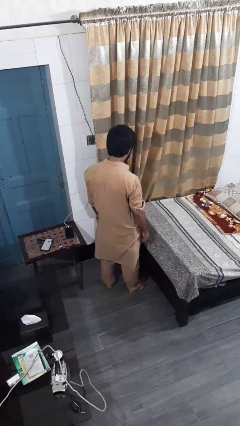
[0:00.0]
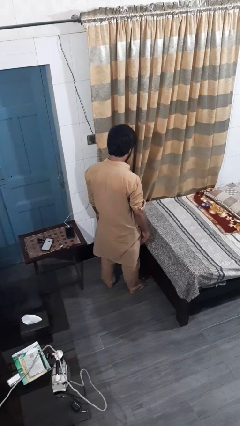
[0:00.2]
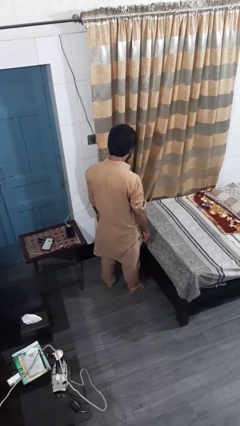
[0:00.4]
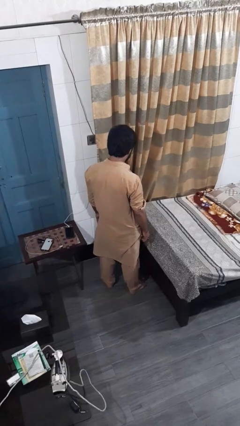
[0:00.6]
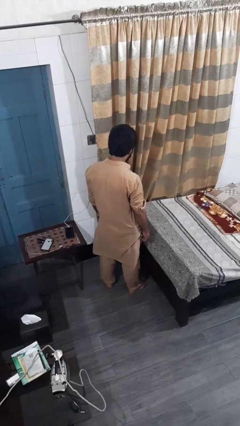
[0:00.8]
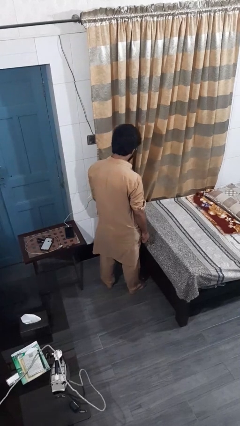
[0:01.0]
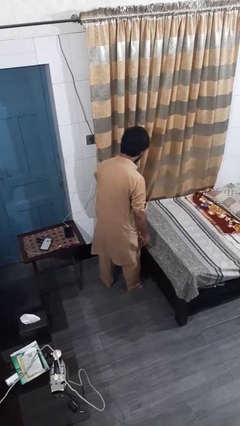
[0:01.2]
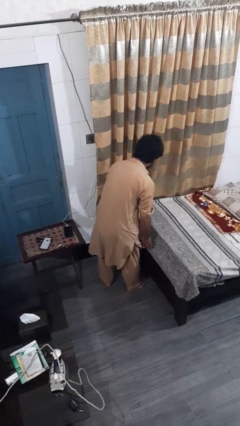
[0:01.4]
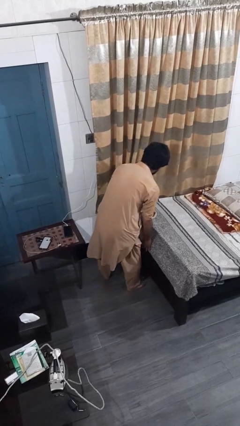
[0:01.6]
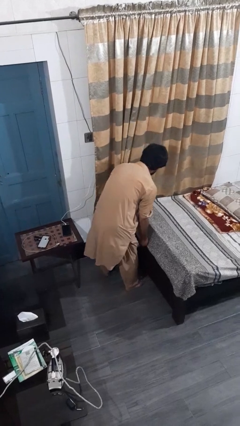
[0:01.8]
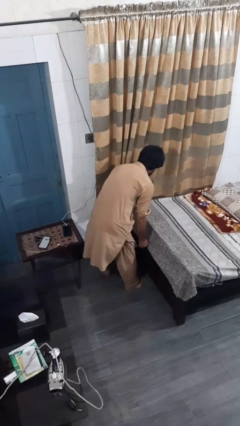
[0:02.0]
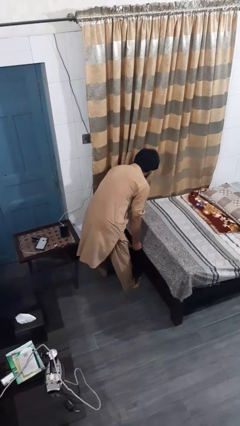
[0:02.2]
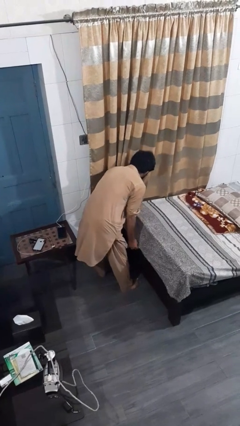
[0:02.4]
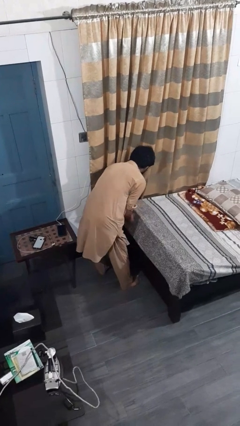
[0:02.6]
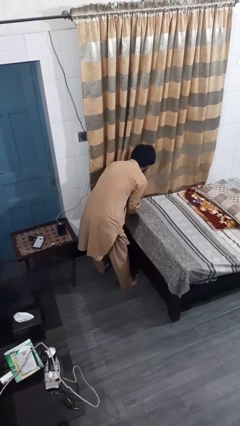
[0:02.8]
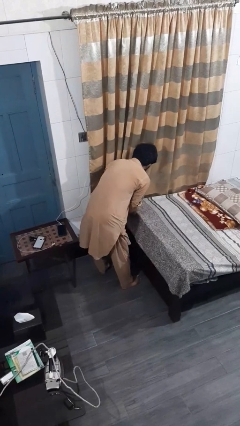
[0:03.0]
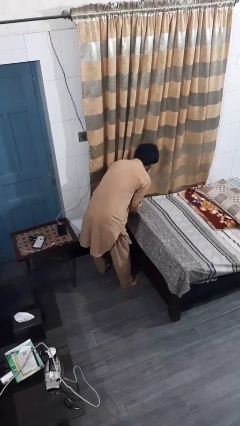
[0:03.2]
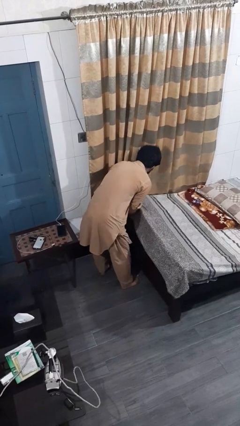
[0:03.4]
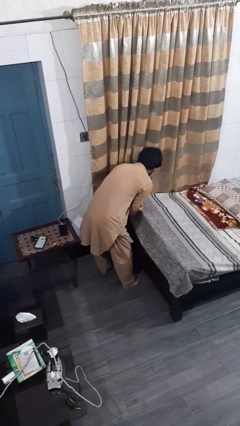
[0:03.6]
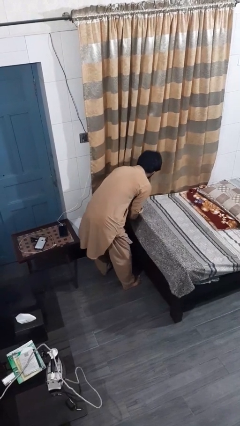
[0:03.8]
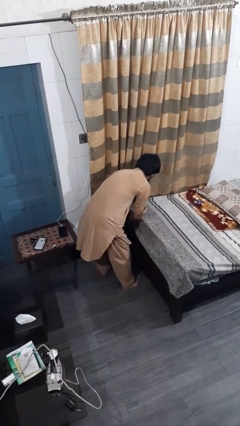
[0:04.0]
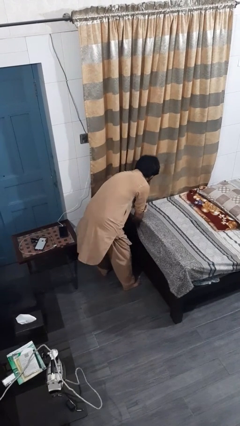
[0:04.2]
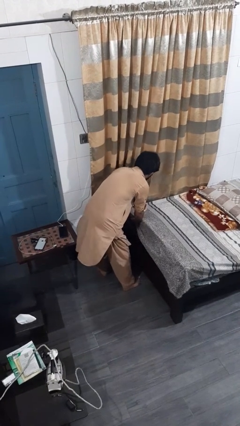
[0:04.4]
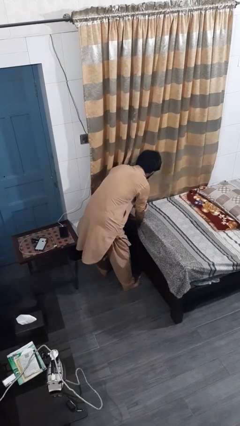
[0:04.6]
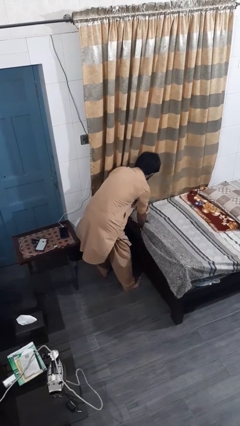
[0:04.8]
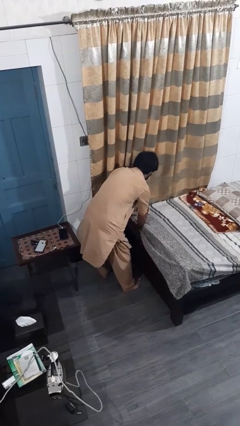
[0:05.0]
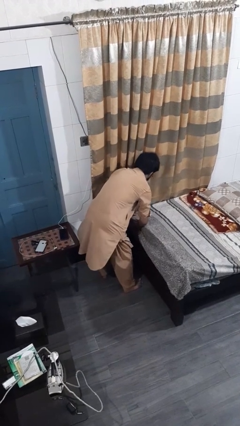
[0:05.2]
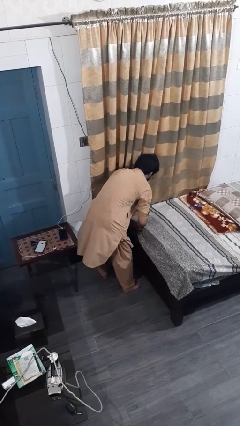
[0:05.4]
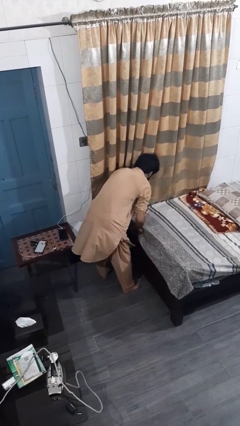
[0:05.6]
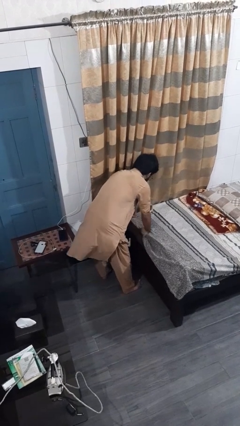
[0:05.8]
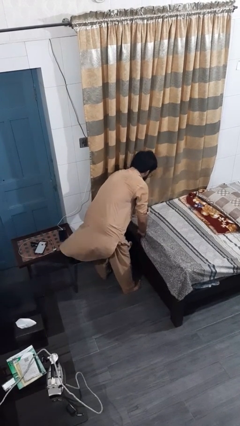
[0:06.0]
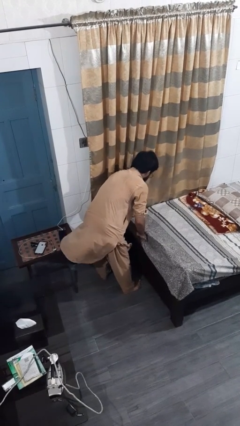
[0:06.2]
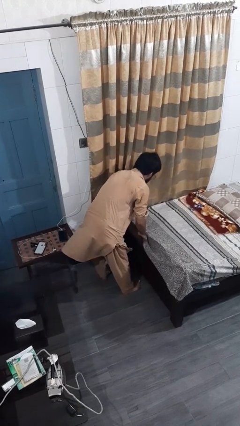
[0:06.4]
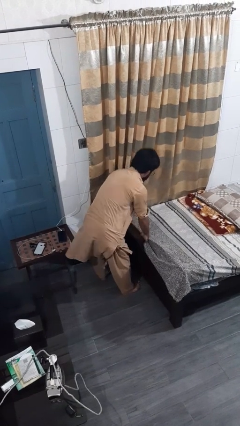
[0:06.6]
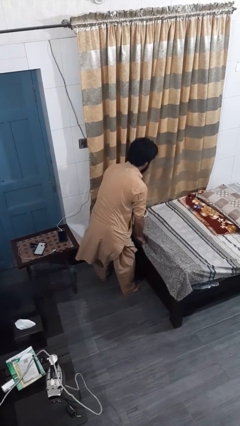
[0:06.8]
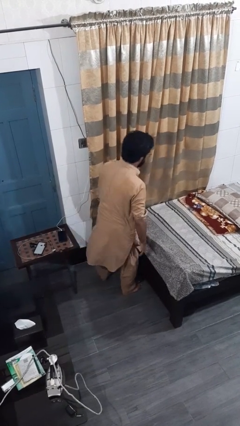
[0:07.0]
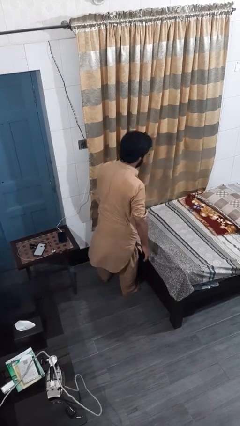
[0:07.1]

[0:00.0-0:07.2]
person makes bed

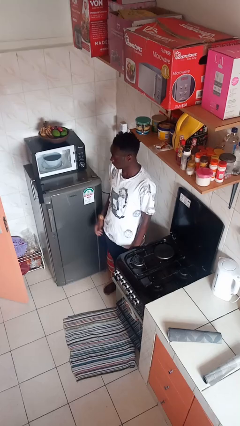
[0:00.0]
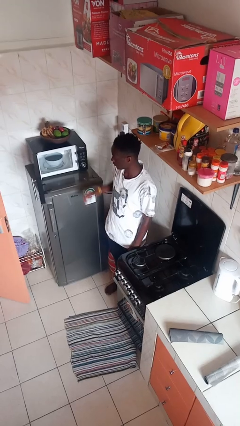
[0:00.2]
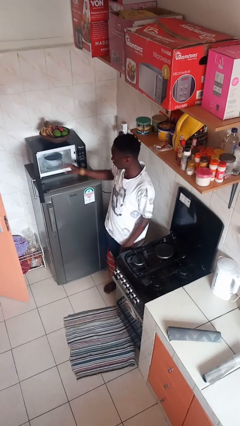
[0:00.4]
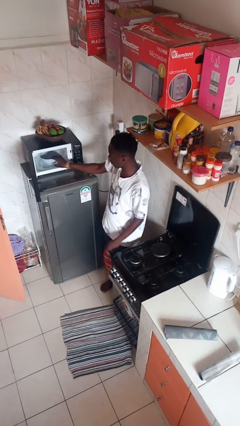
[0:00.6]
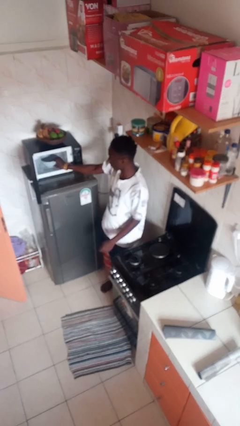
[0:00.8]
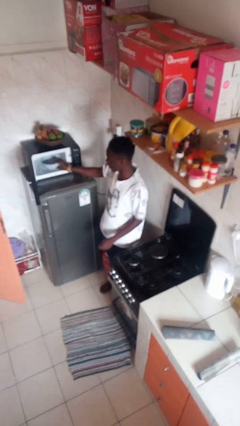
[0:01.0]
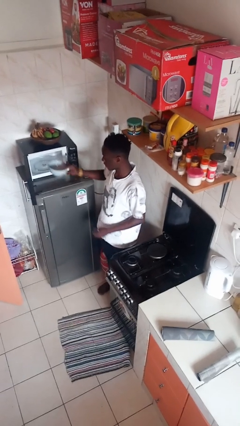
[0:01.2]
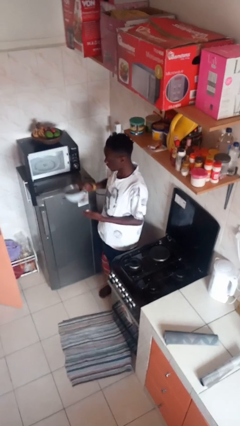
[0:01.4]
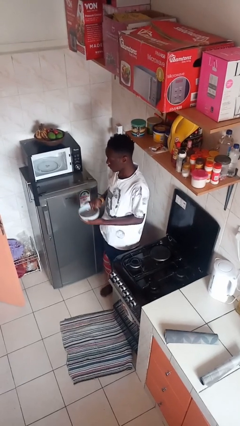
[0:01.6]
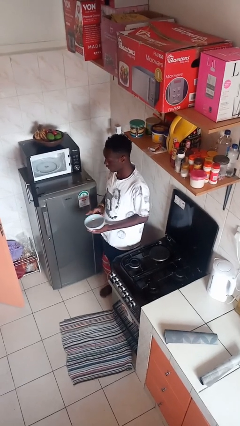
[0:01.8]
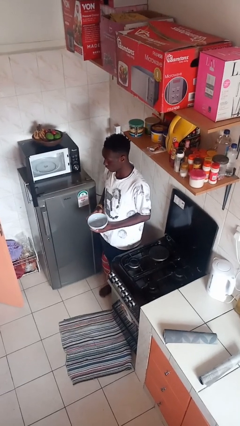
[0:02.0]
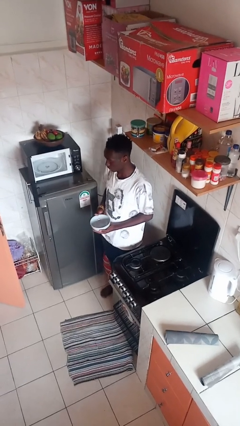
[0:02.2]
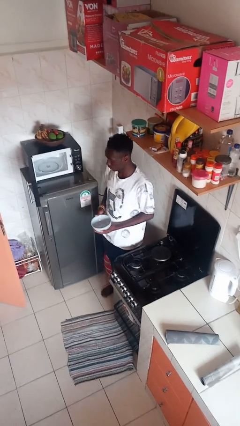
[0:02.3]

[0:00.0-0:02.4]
person takes object from microwave

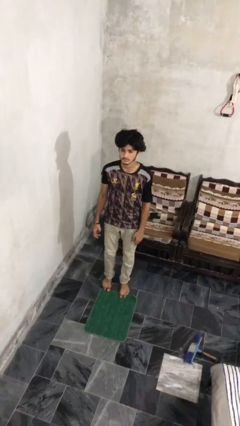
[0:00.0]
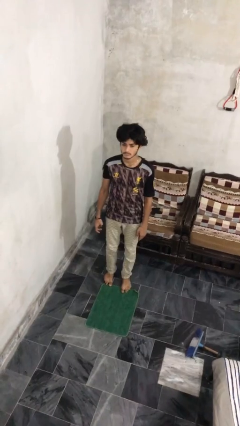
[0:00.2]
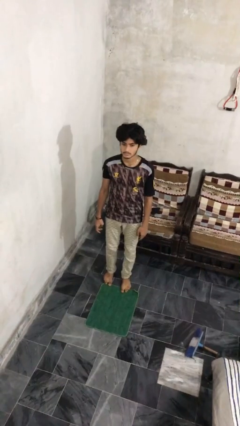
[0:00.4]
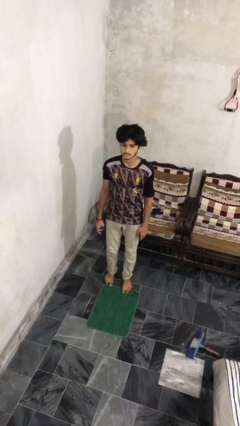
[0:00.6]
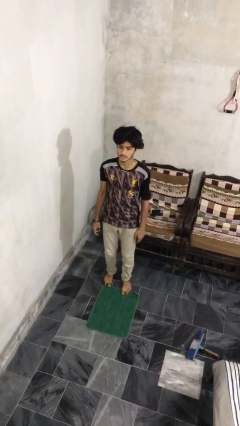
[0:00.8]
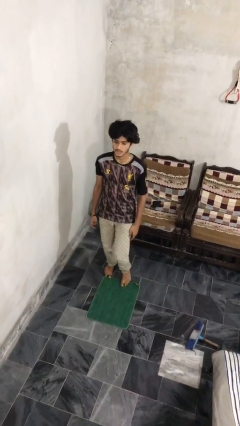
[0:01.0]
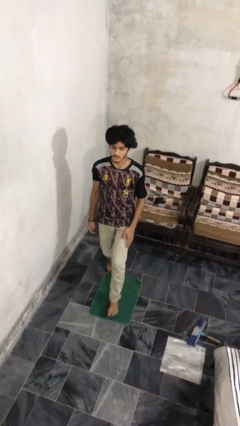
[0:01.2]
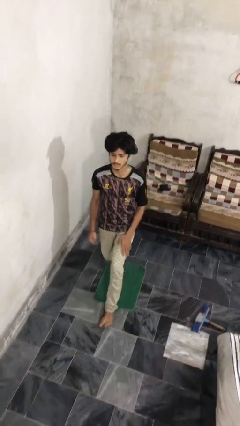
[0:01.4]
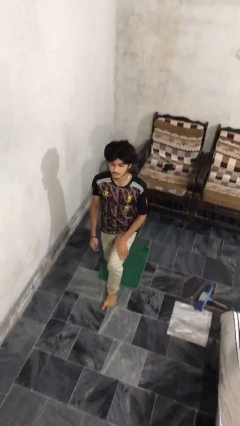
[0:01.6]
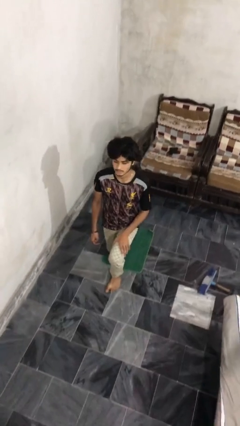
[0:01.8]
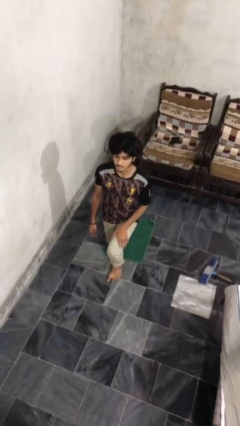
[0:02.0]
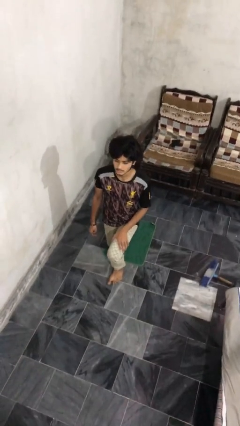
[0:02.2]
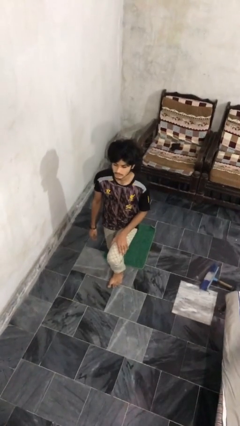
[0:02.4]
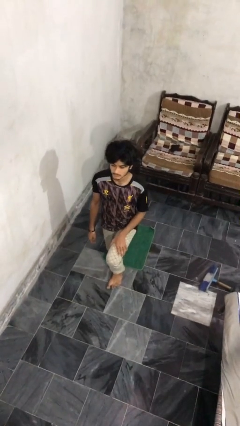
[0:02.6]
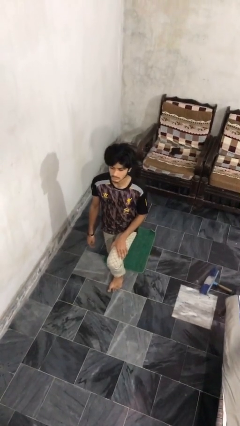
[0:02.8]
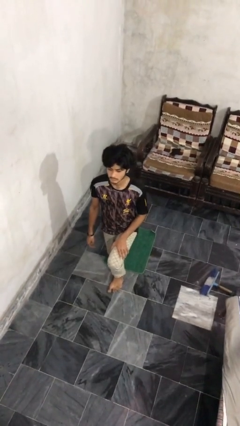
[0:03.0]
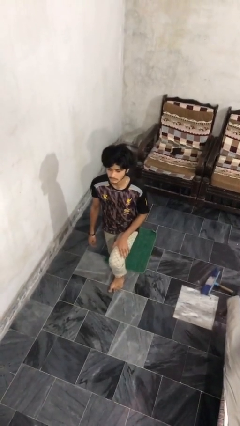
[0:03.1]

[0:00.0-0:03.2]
person kneels

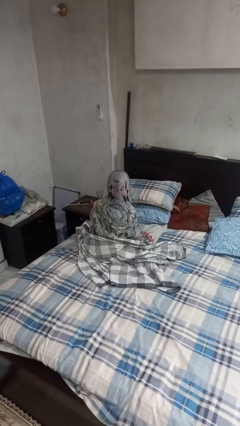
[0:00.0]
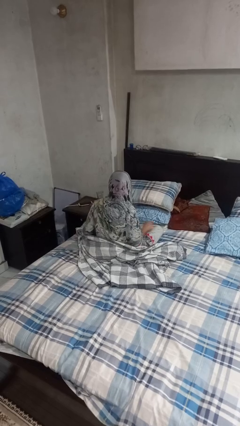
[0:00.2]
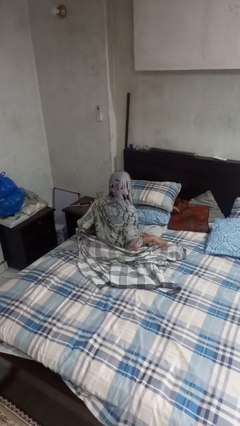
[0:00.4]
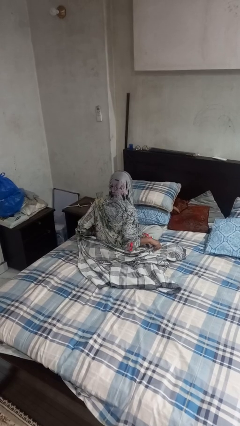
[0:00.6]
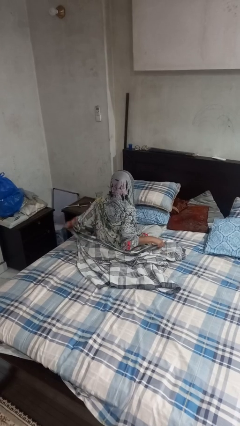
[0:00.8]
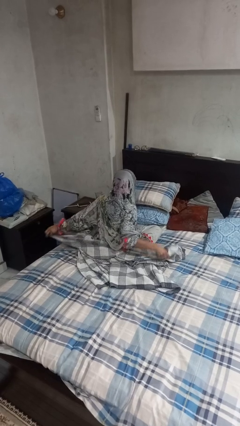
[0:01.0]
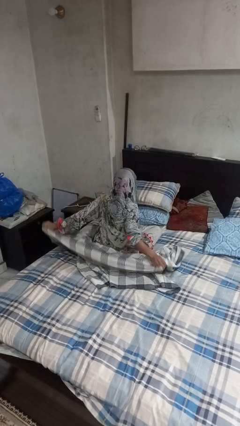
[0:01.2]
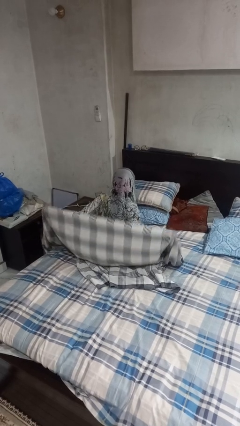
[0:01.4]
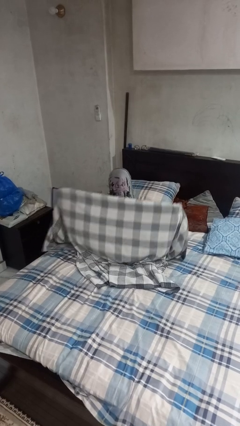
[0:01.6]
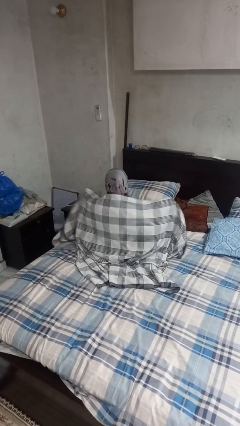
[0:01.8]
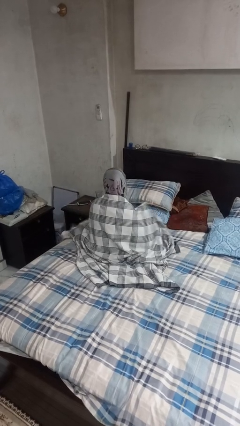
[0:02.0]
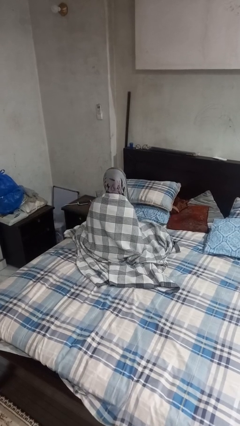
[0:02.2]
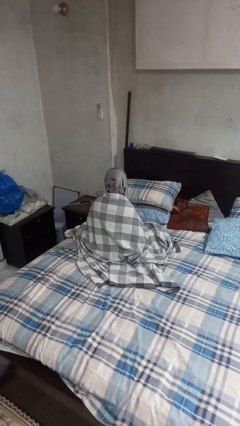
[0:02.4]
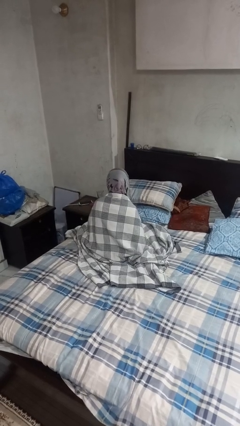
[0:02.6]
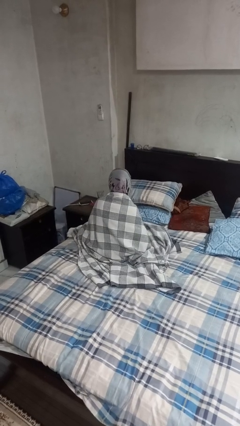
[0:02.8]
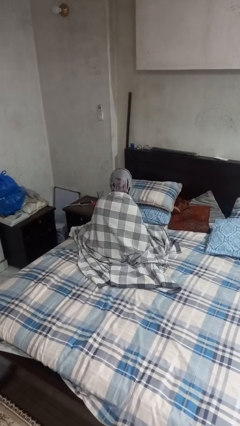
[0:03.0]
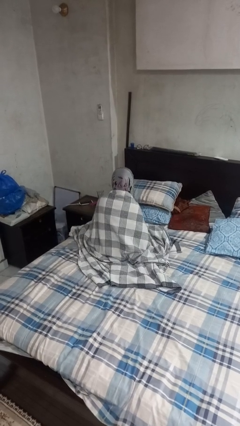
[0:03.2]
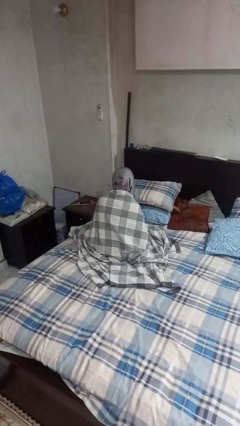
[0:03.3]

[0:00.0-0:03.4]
person covers with blanket

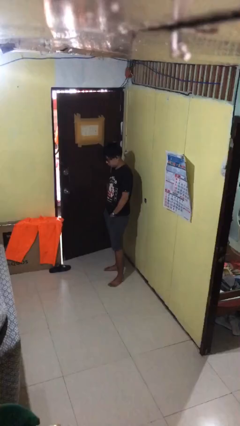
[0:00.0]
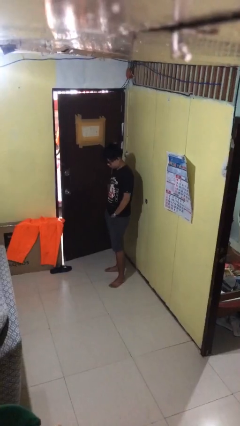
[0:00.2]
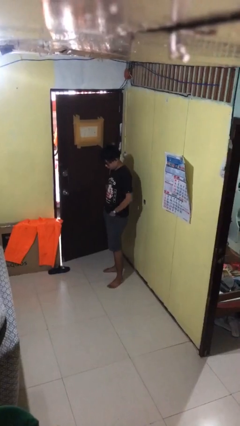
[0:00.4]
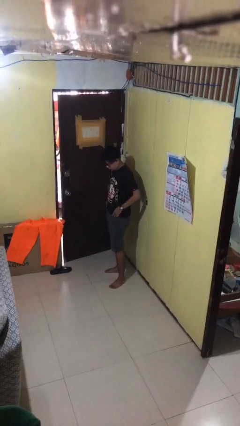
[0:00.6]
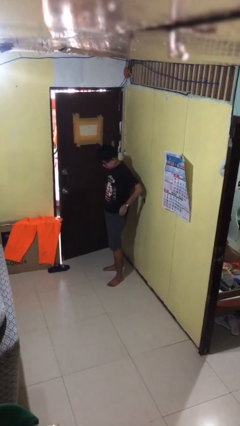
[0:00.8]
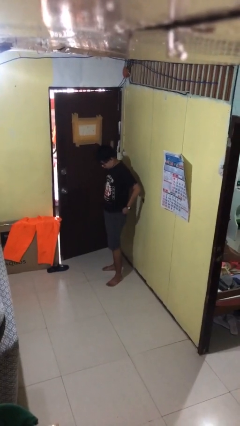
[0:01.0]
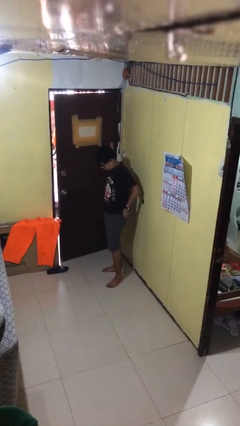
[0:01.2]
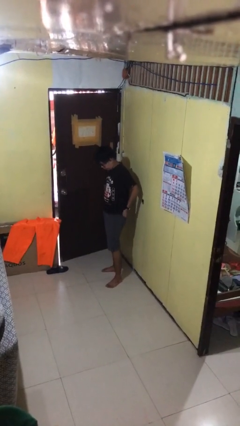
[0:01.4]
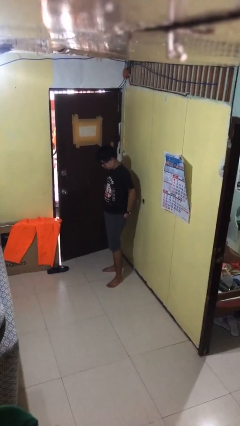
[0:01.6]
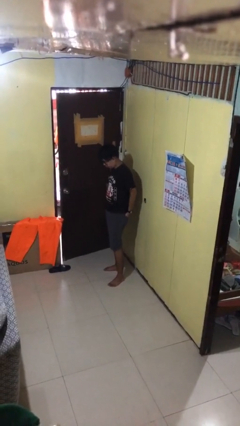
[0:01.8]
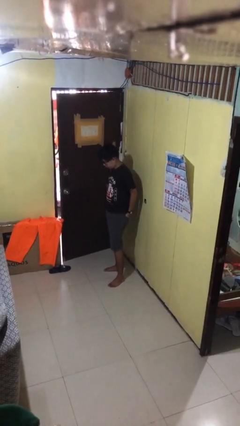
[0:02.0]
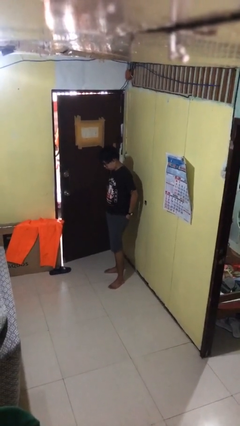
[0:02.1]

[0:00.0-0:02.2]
person puts hands in back pockets
